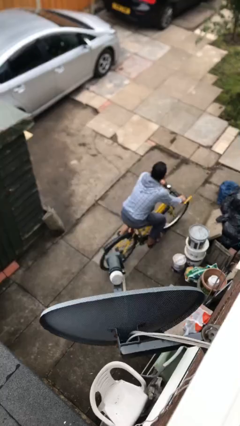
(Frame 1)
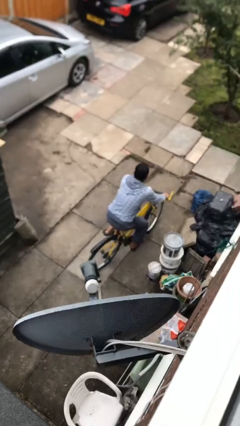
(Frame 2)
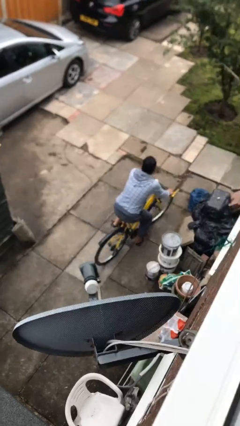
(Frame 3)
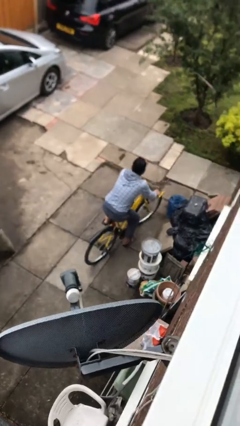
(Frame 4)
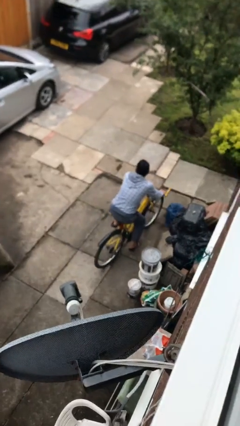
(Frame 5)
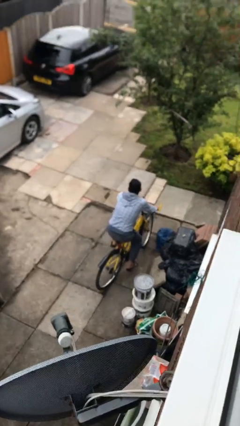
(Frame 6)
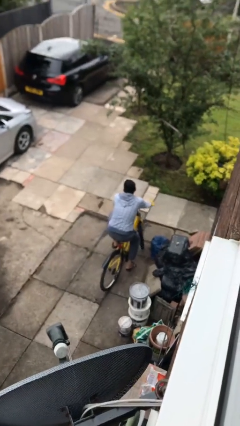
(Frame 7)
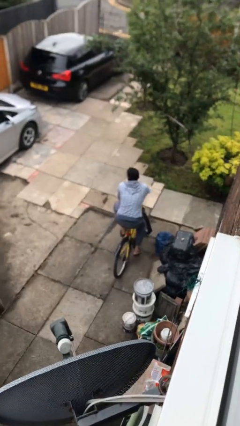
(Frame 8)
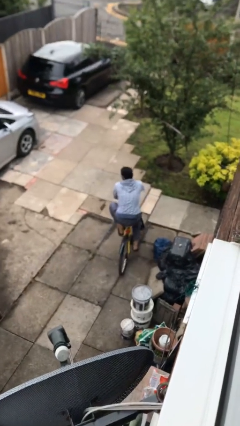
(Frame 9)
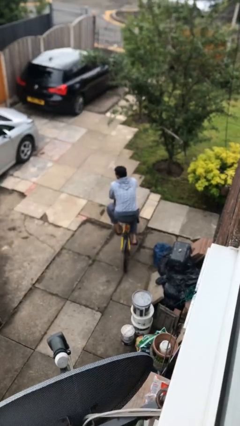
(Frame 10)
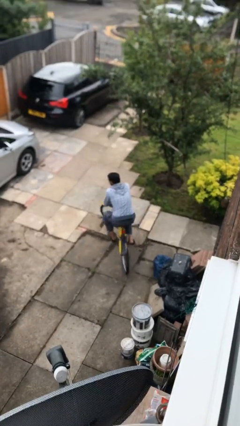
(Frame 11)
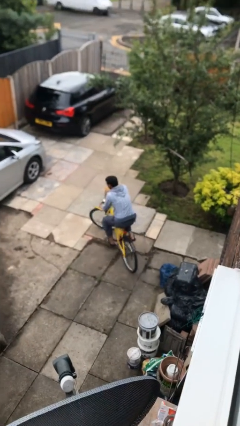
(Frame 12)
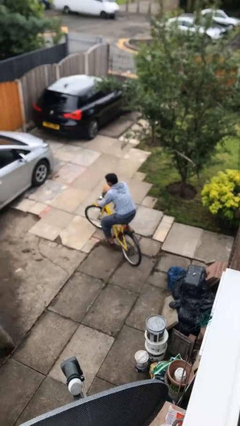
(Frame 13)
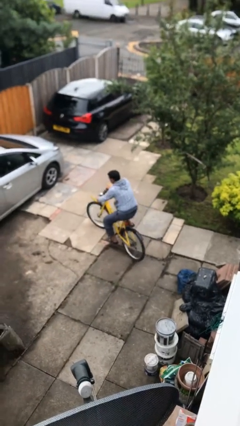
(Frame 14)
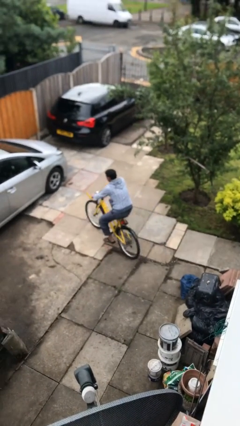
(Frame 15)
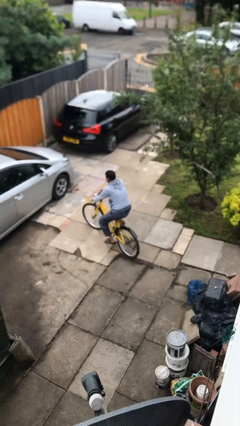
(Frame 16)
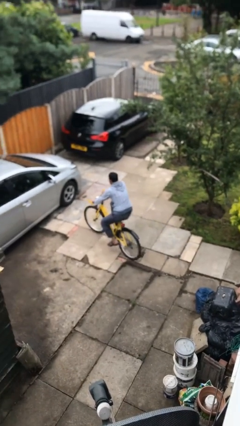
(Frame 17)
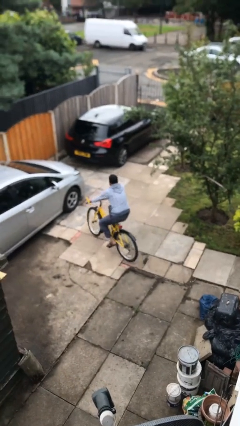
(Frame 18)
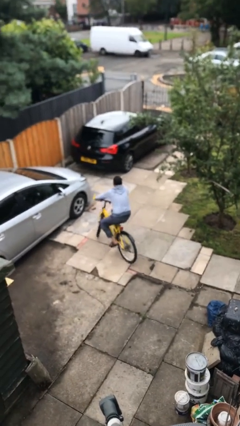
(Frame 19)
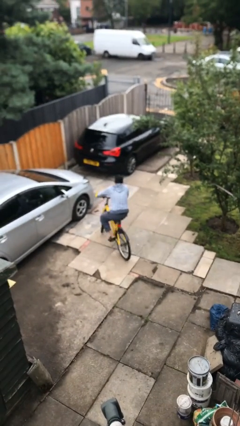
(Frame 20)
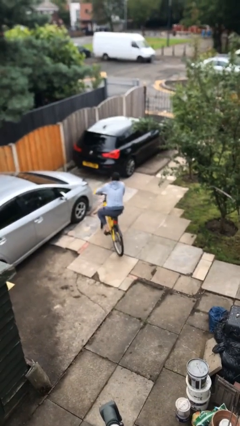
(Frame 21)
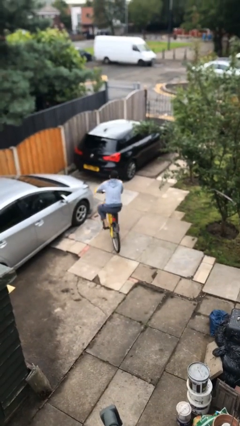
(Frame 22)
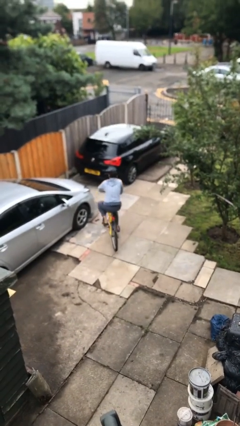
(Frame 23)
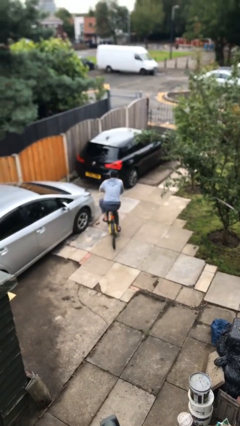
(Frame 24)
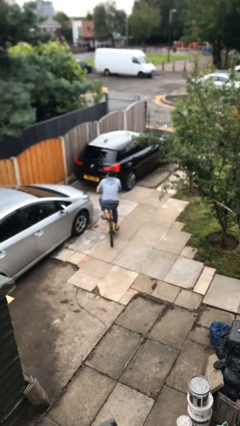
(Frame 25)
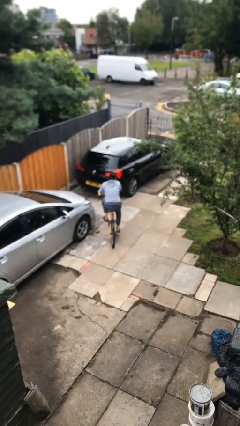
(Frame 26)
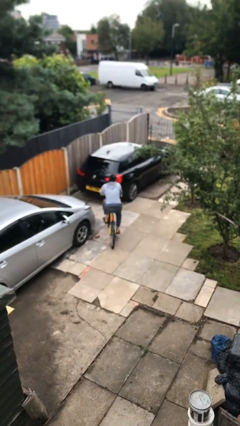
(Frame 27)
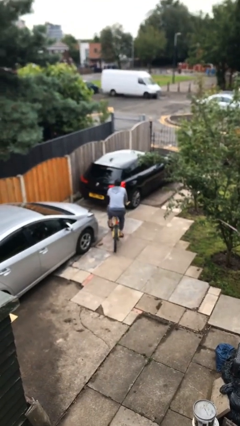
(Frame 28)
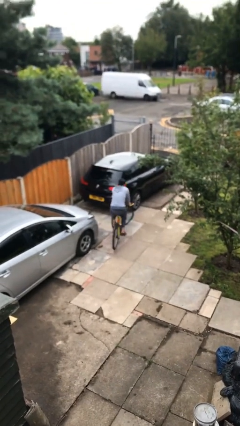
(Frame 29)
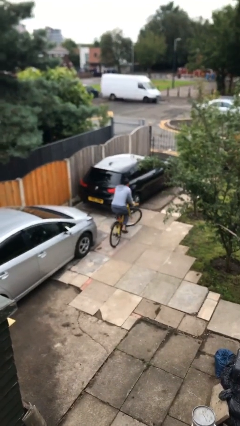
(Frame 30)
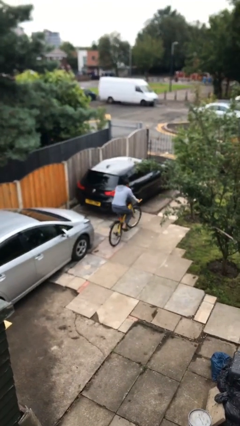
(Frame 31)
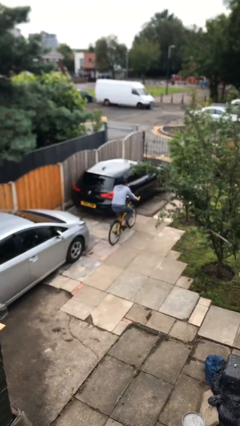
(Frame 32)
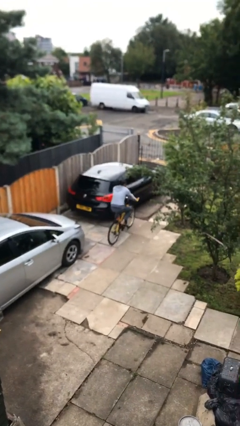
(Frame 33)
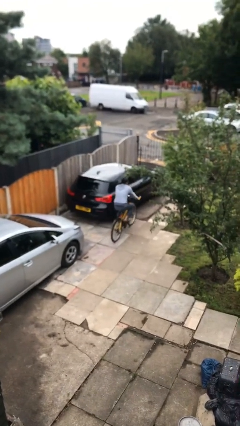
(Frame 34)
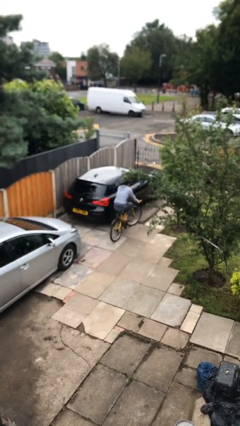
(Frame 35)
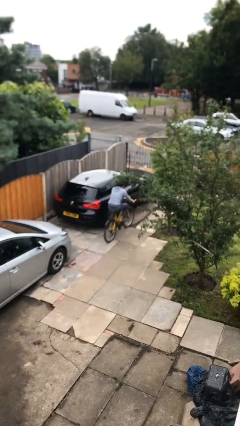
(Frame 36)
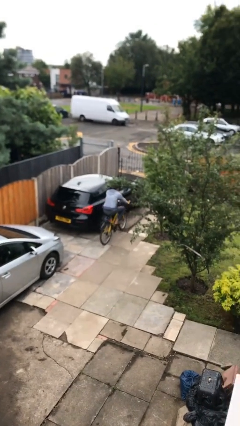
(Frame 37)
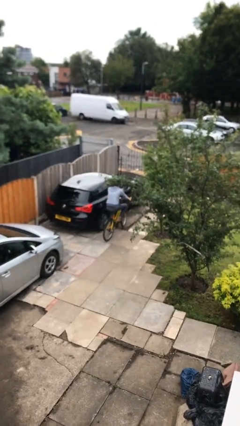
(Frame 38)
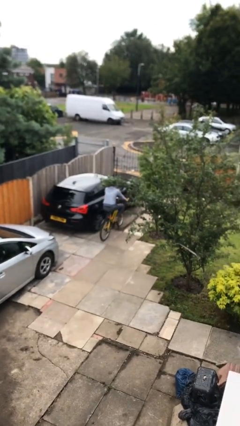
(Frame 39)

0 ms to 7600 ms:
person rides bicycle

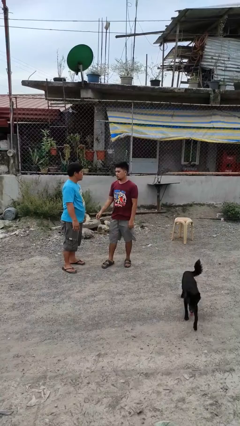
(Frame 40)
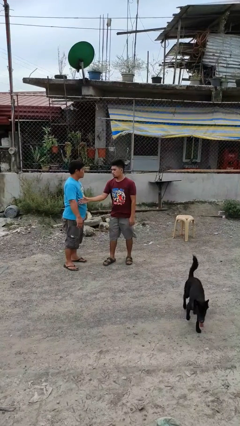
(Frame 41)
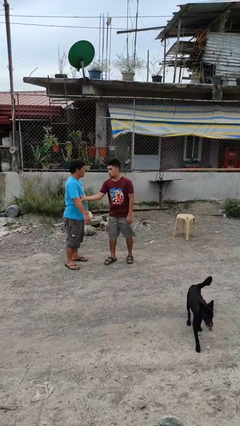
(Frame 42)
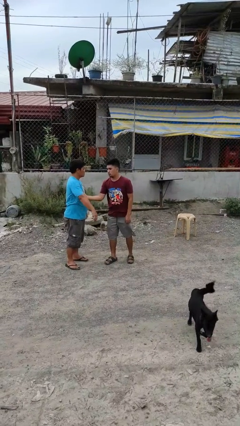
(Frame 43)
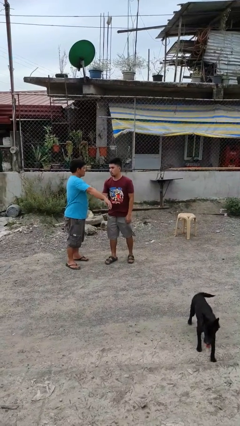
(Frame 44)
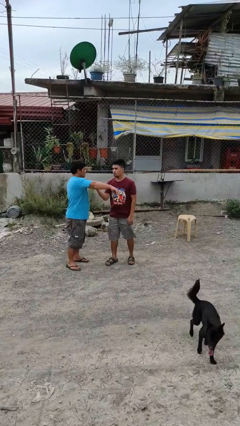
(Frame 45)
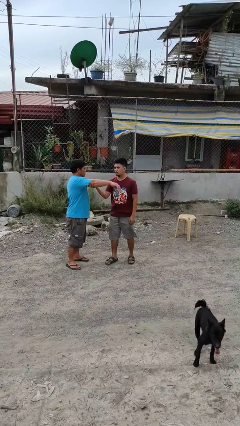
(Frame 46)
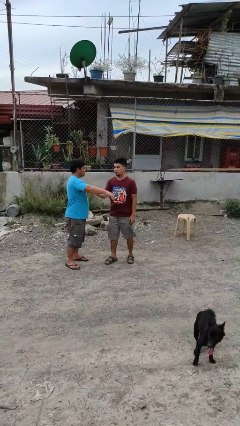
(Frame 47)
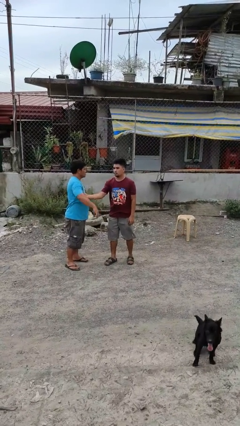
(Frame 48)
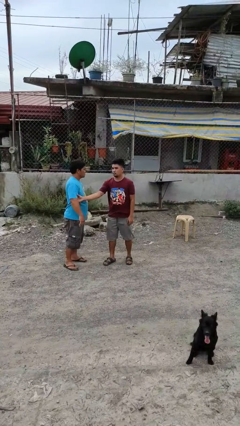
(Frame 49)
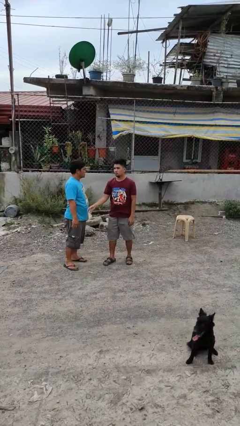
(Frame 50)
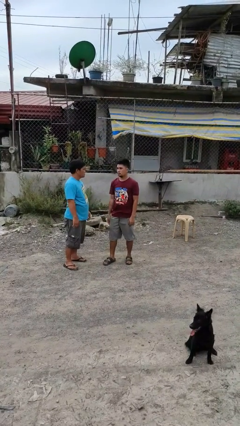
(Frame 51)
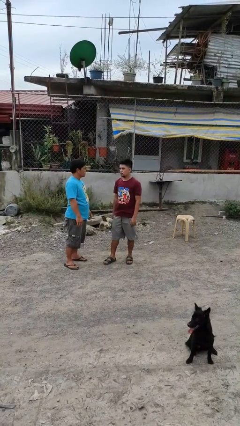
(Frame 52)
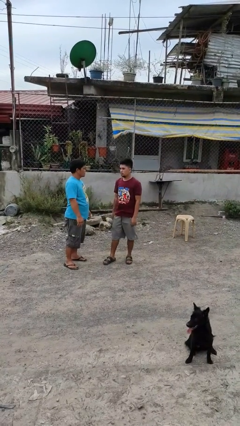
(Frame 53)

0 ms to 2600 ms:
person grabs person by bicep

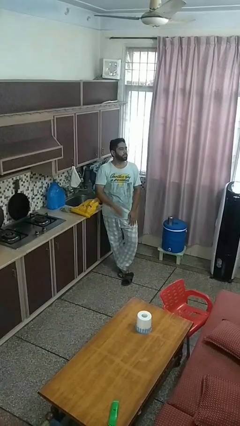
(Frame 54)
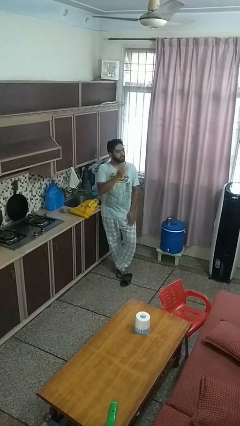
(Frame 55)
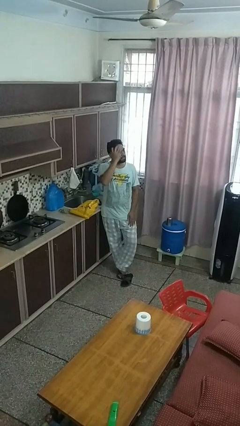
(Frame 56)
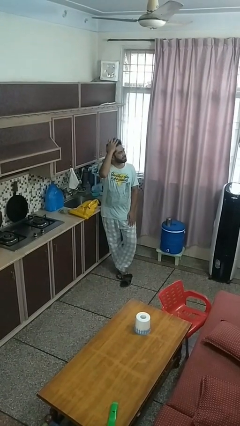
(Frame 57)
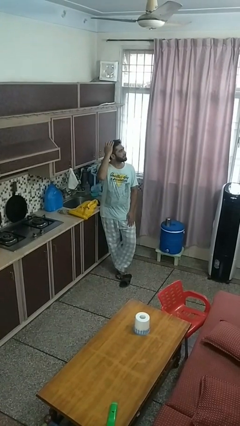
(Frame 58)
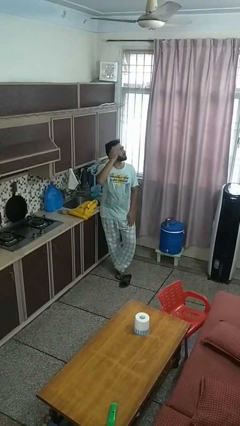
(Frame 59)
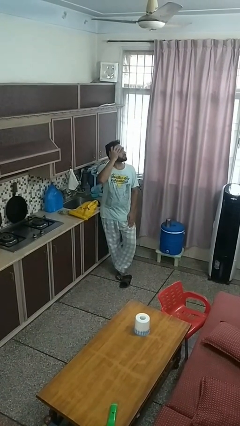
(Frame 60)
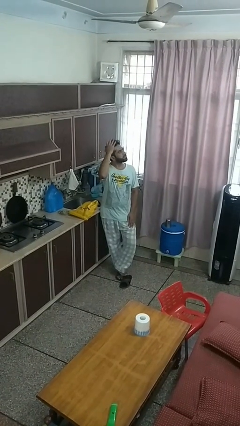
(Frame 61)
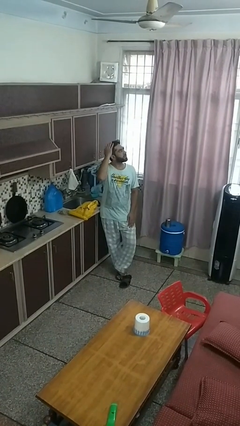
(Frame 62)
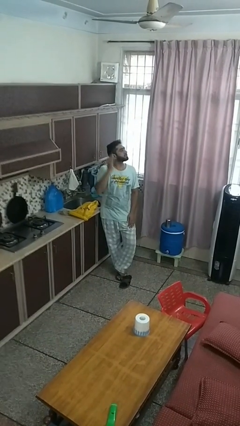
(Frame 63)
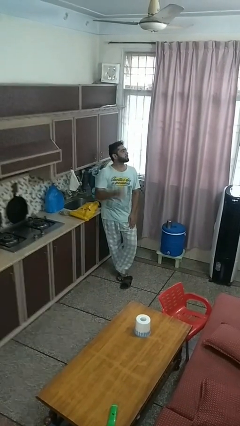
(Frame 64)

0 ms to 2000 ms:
person strokes hair

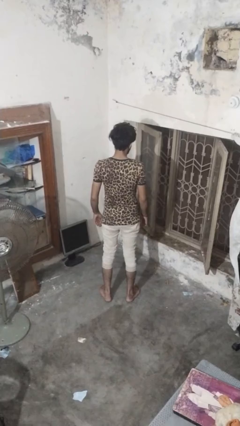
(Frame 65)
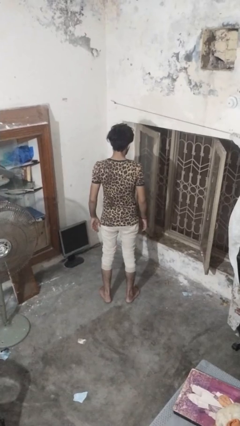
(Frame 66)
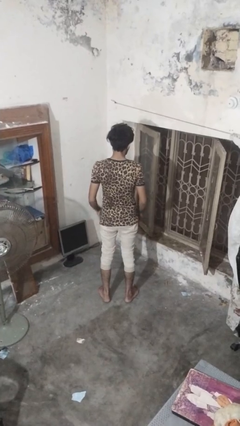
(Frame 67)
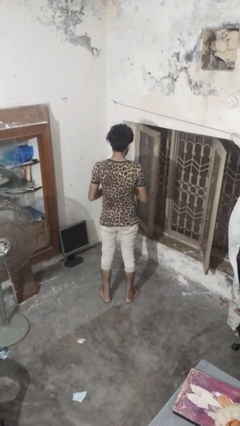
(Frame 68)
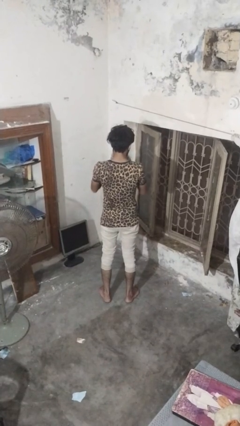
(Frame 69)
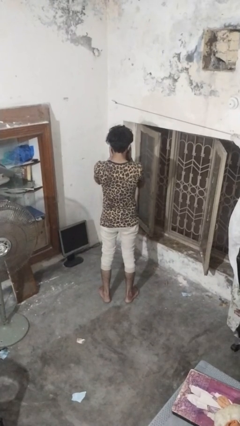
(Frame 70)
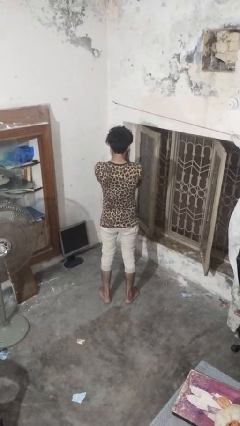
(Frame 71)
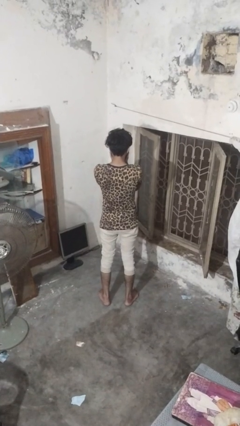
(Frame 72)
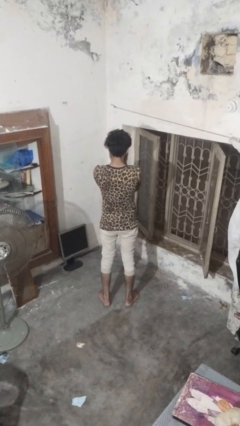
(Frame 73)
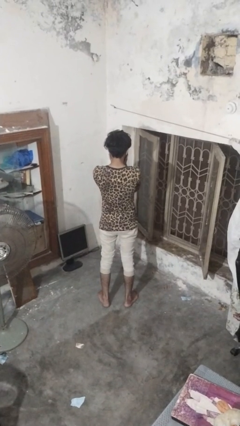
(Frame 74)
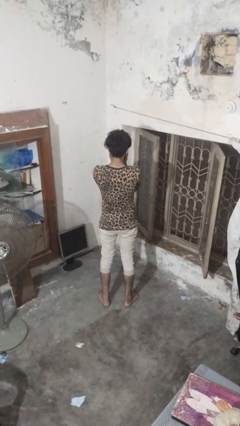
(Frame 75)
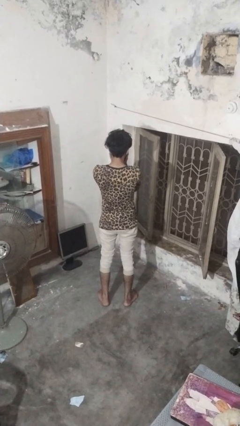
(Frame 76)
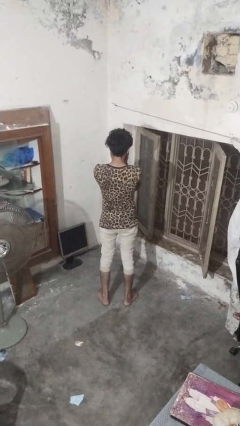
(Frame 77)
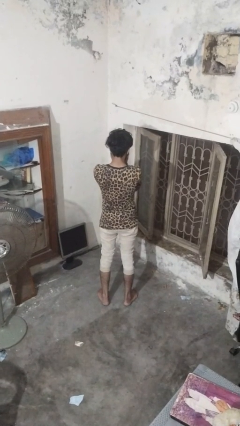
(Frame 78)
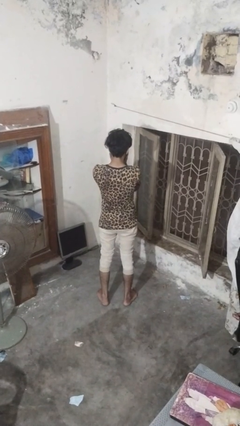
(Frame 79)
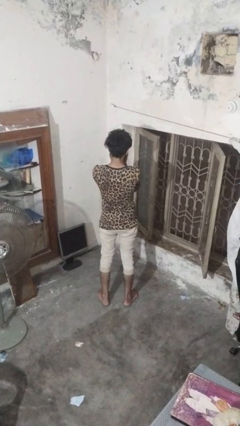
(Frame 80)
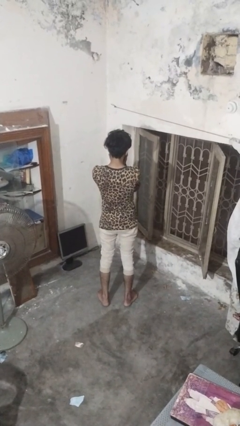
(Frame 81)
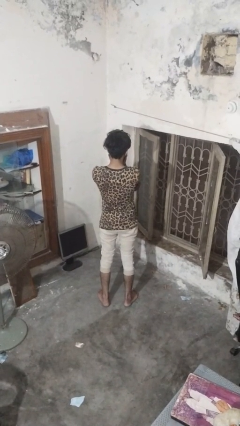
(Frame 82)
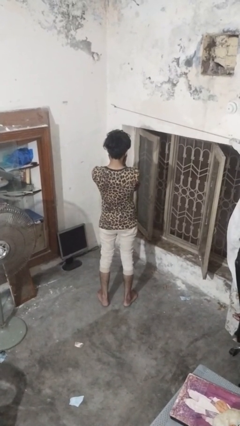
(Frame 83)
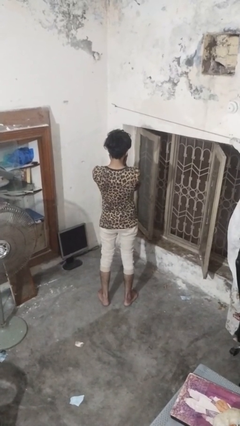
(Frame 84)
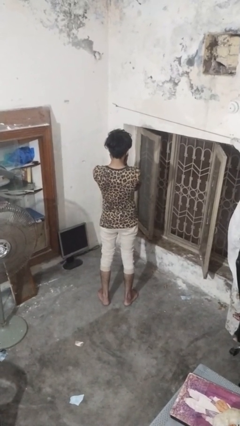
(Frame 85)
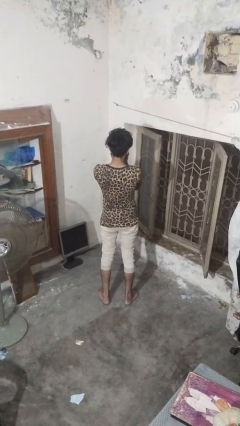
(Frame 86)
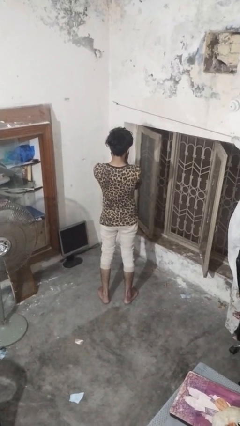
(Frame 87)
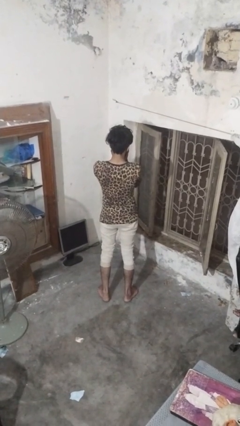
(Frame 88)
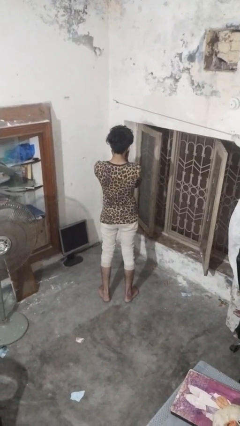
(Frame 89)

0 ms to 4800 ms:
person covers face with hands

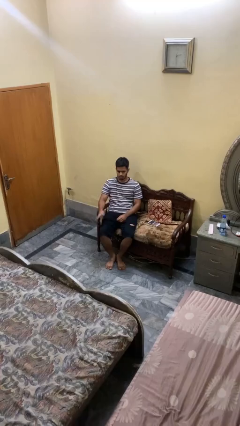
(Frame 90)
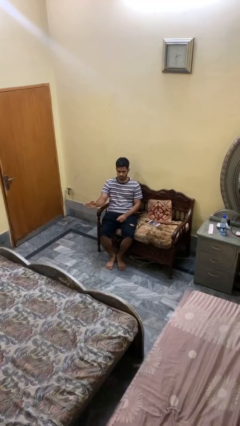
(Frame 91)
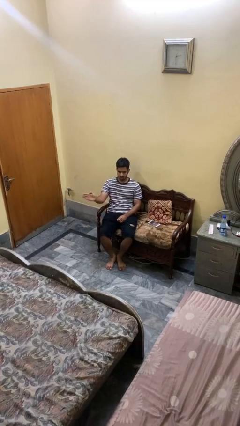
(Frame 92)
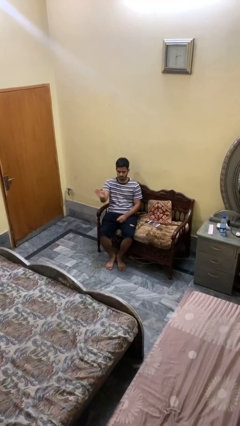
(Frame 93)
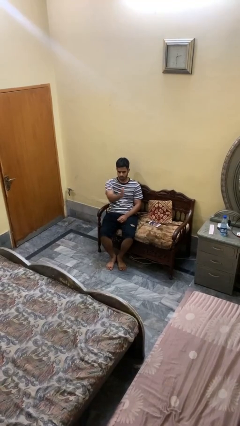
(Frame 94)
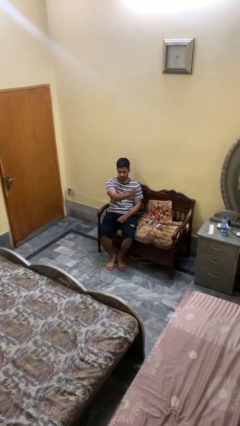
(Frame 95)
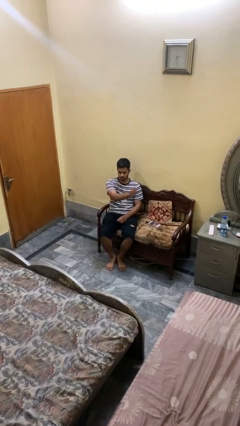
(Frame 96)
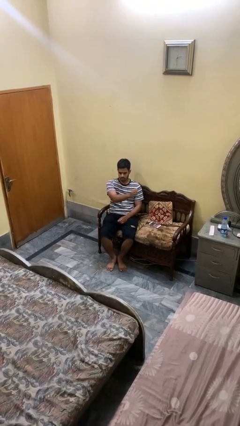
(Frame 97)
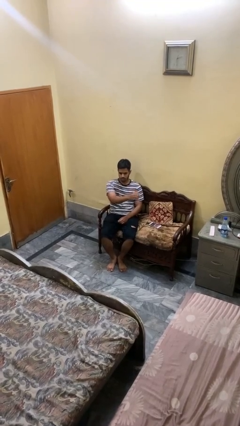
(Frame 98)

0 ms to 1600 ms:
person gestures swipe left
